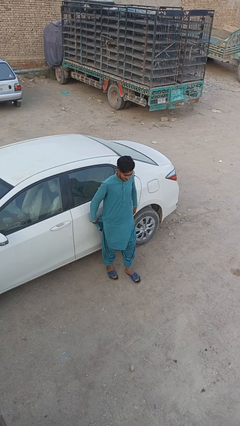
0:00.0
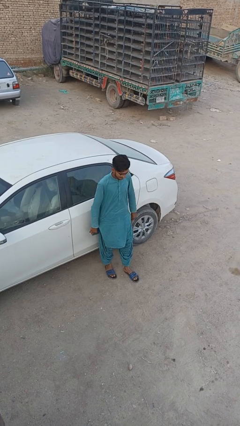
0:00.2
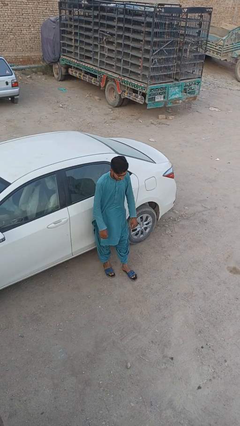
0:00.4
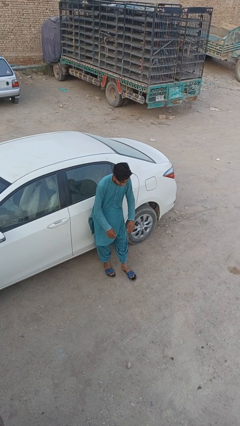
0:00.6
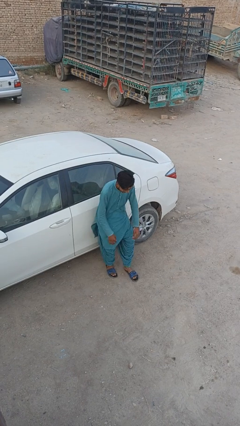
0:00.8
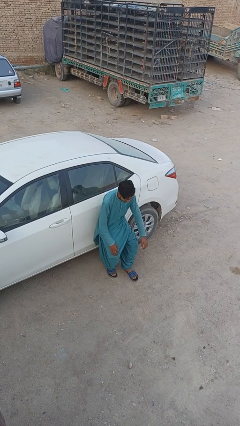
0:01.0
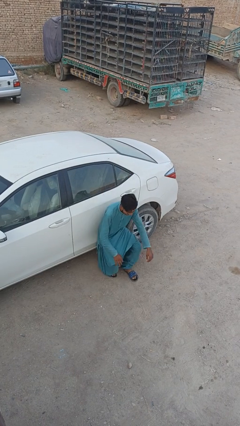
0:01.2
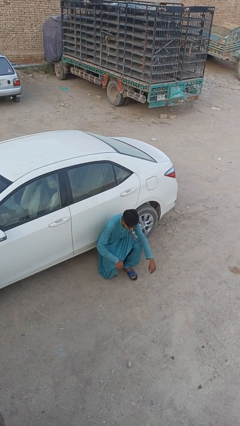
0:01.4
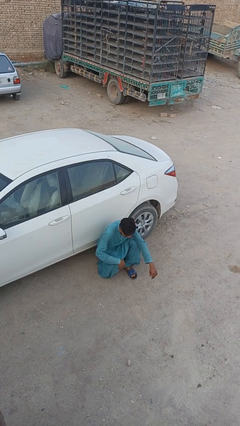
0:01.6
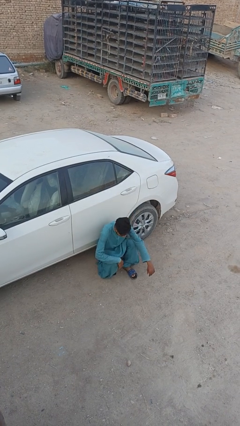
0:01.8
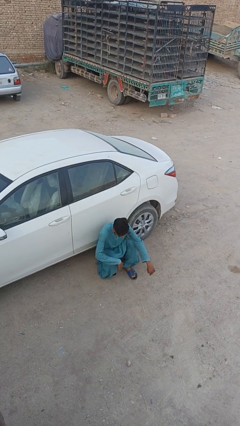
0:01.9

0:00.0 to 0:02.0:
person leans against car

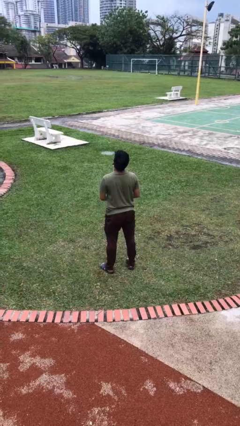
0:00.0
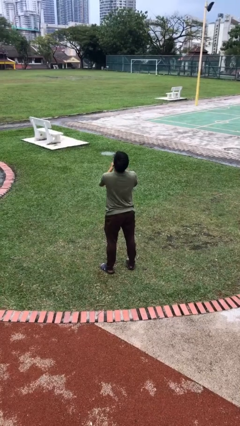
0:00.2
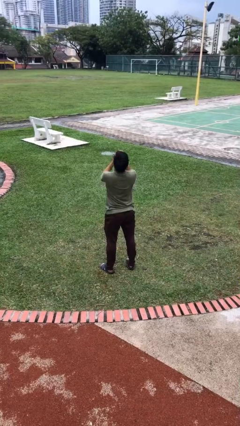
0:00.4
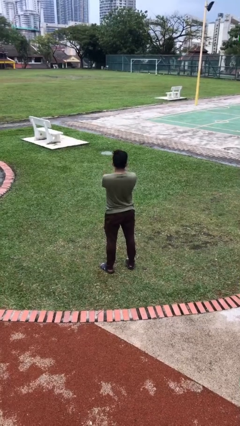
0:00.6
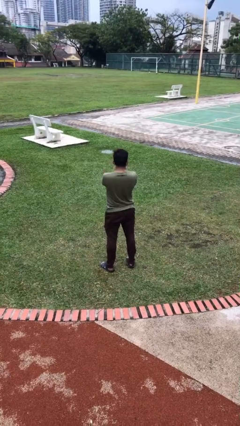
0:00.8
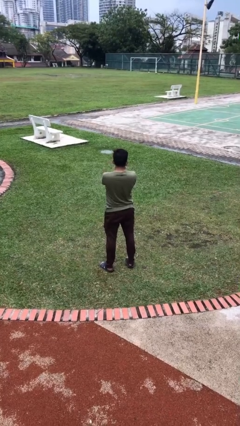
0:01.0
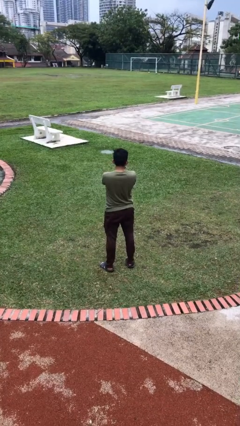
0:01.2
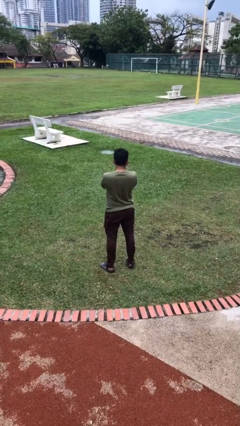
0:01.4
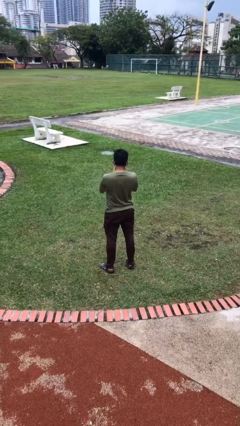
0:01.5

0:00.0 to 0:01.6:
person sneezes into hand

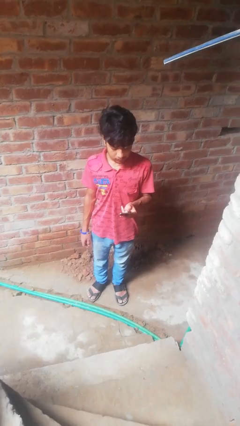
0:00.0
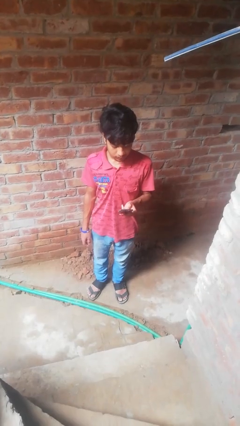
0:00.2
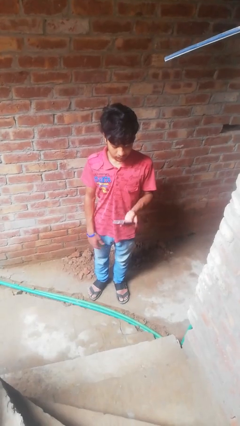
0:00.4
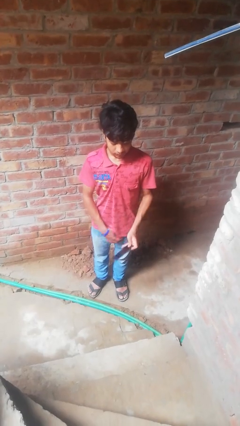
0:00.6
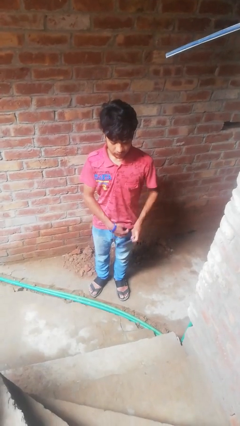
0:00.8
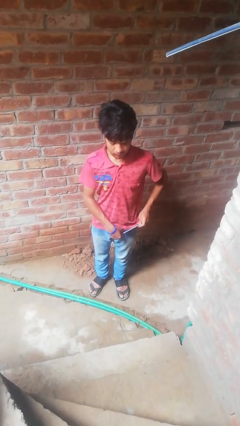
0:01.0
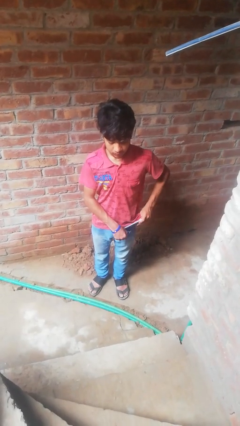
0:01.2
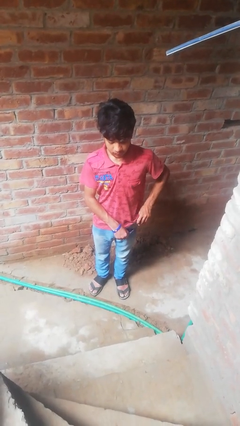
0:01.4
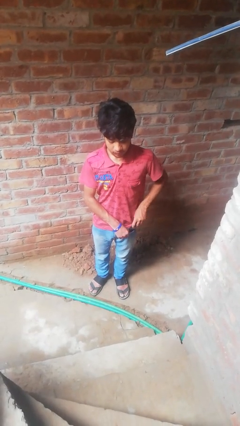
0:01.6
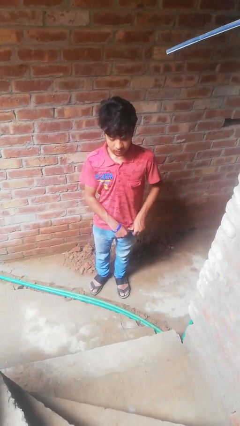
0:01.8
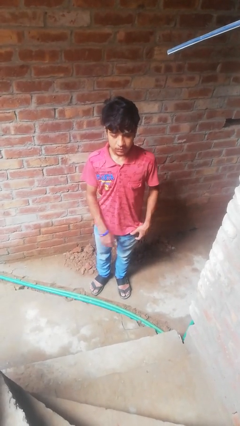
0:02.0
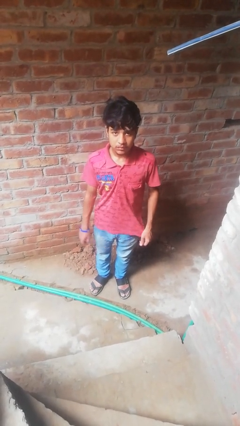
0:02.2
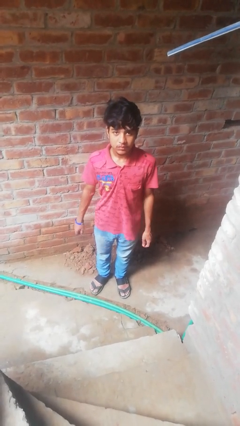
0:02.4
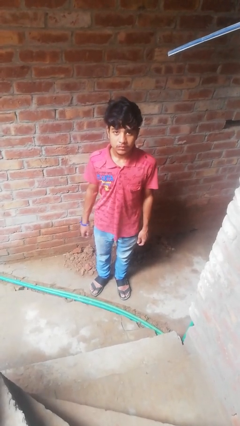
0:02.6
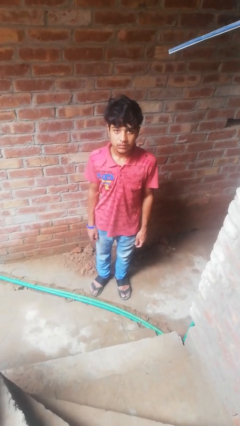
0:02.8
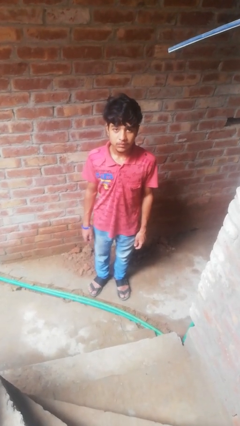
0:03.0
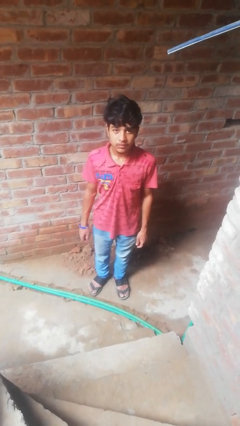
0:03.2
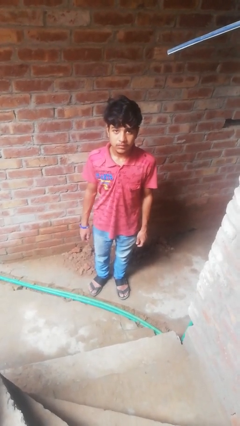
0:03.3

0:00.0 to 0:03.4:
person puts phone into pocket

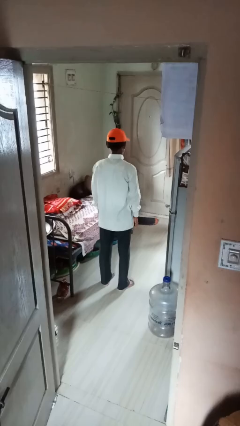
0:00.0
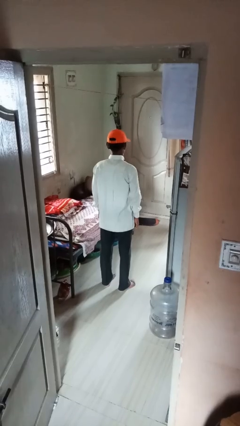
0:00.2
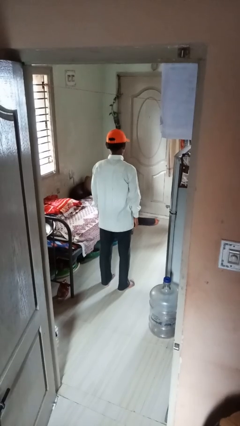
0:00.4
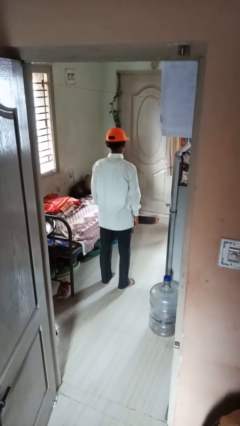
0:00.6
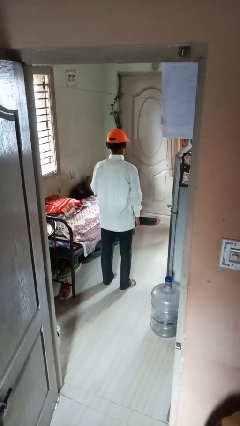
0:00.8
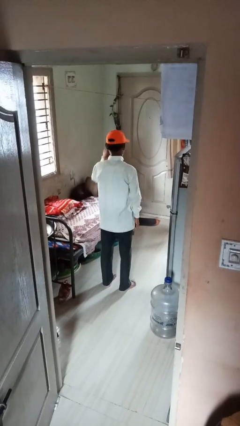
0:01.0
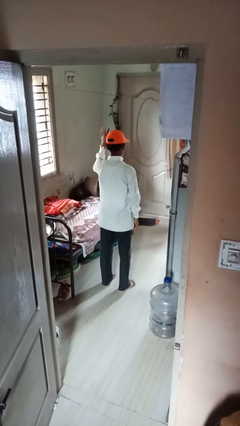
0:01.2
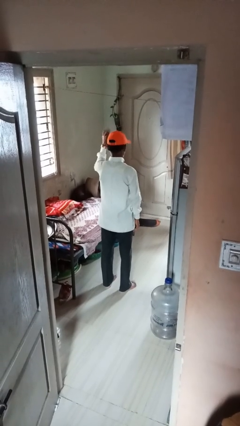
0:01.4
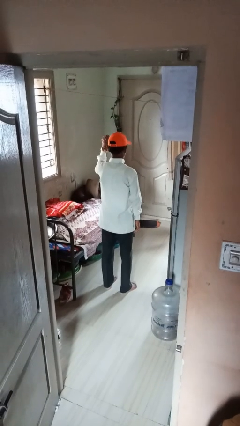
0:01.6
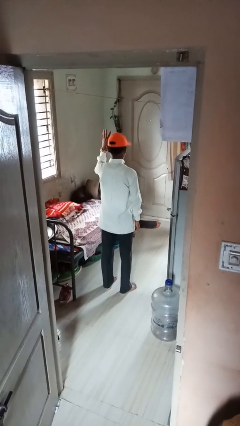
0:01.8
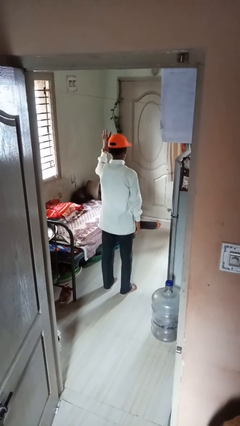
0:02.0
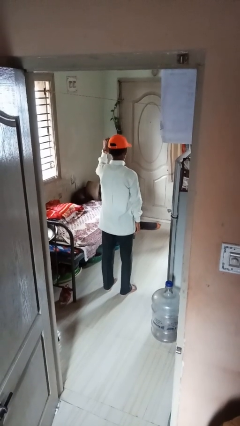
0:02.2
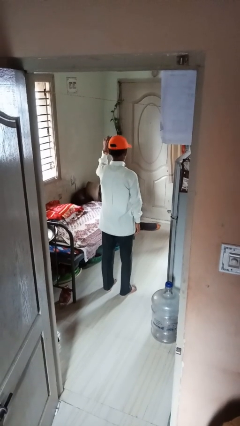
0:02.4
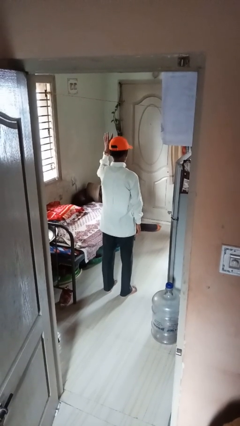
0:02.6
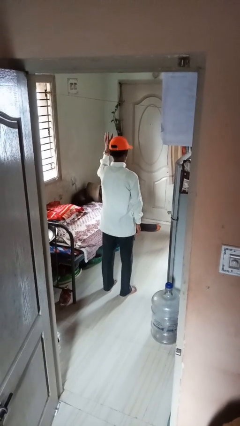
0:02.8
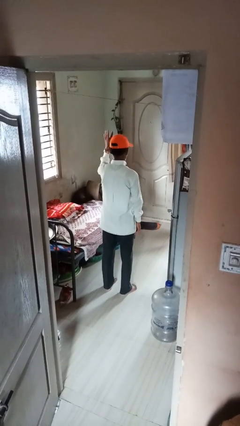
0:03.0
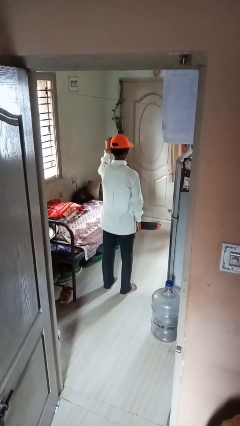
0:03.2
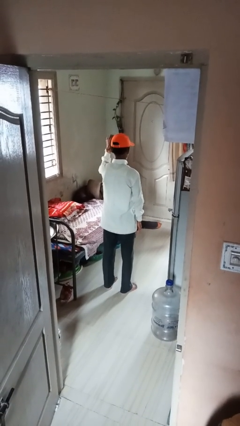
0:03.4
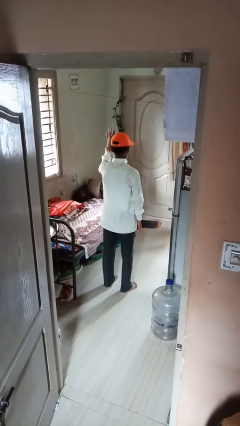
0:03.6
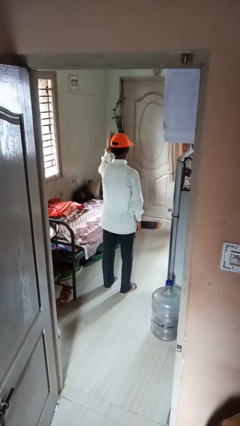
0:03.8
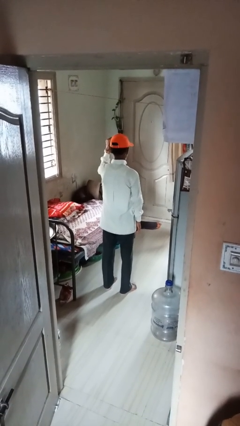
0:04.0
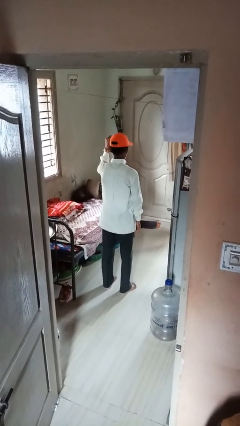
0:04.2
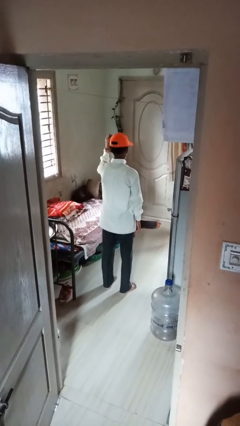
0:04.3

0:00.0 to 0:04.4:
person gestures come here

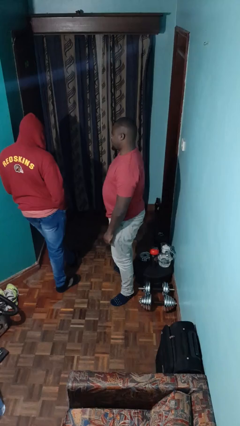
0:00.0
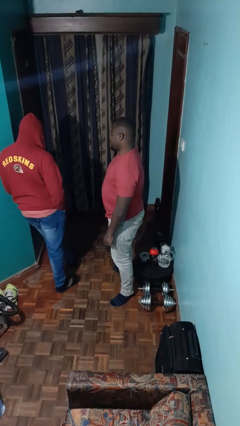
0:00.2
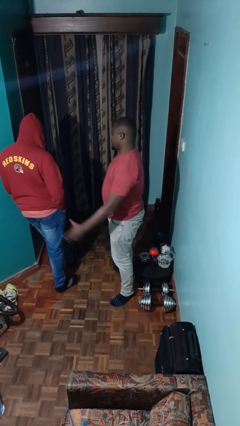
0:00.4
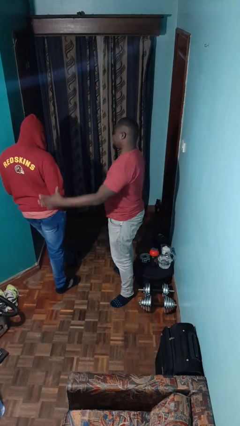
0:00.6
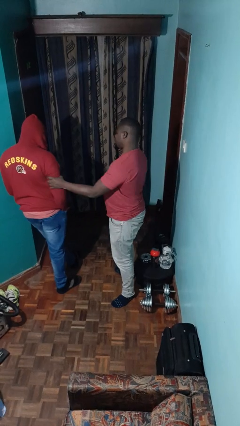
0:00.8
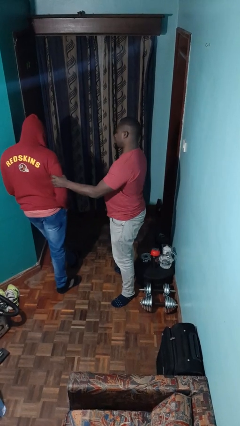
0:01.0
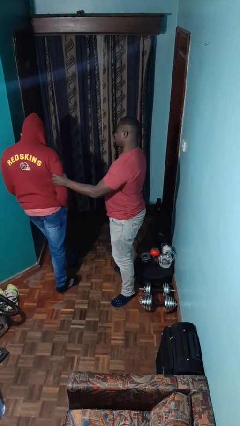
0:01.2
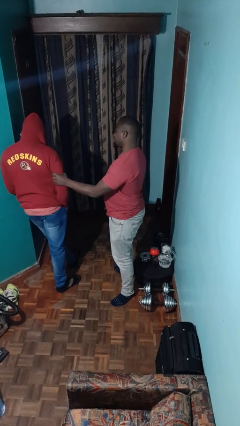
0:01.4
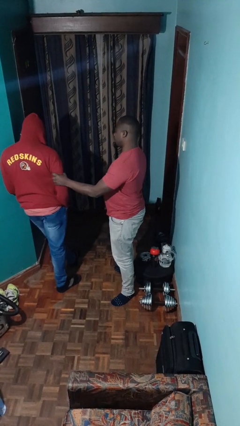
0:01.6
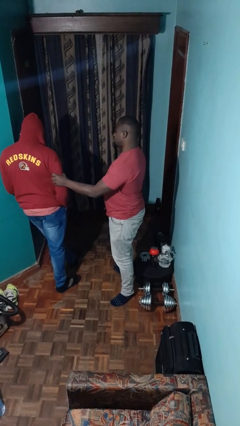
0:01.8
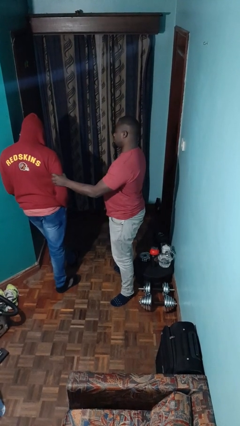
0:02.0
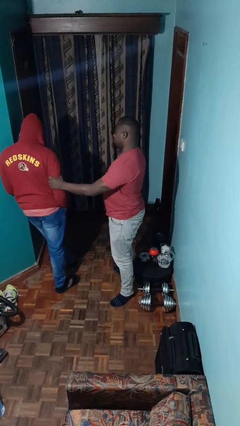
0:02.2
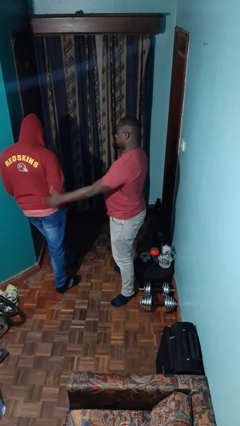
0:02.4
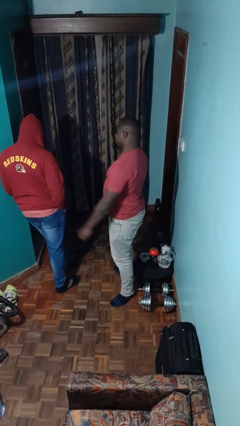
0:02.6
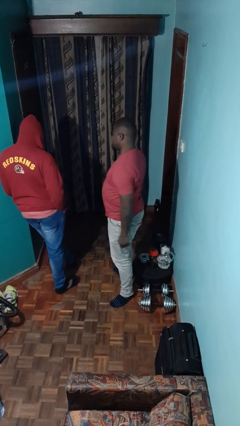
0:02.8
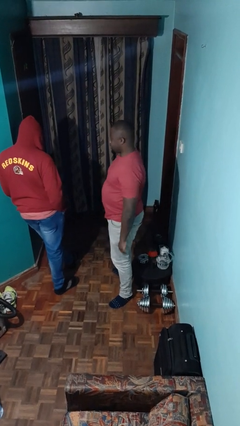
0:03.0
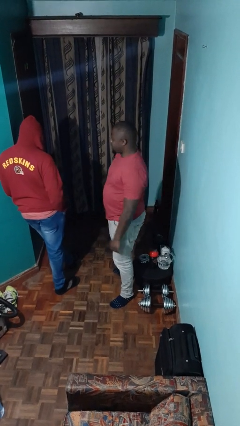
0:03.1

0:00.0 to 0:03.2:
person grabs person by bicep

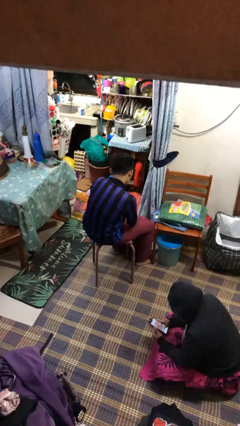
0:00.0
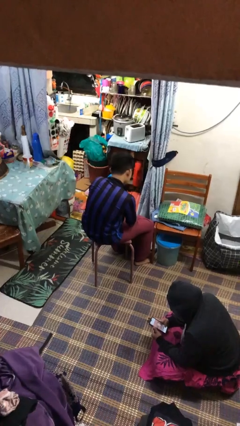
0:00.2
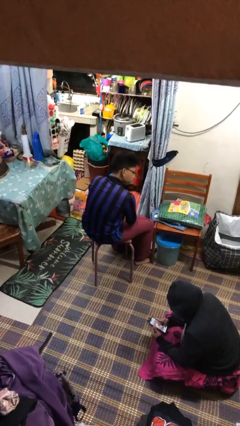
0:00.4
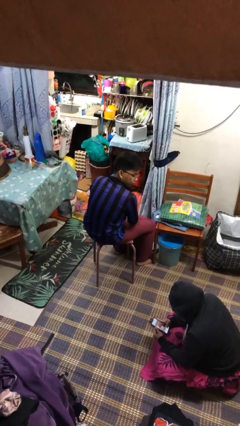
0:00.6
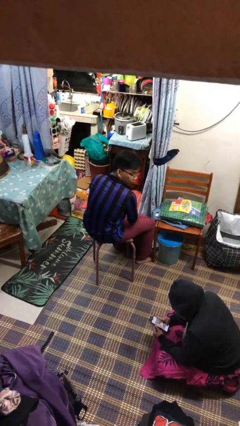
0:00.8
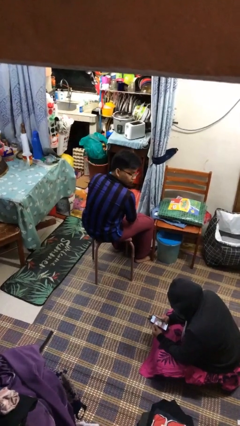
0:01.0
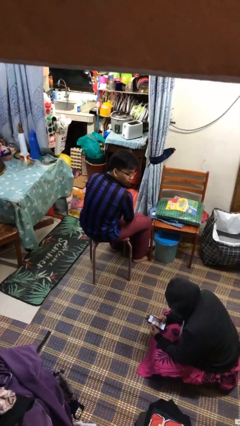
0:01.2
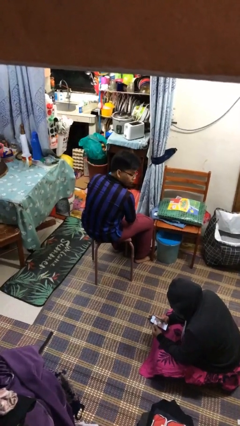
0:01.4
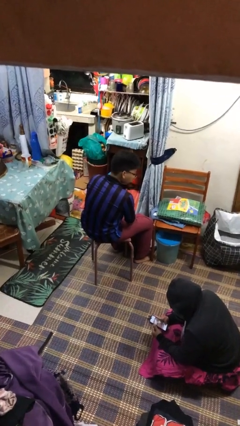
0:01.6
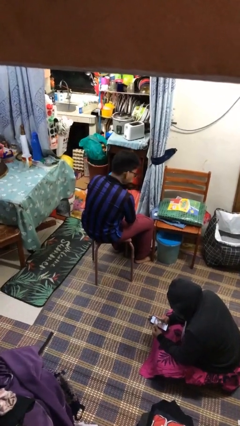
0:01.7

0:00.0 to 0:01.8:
person looks over shoulder

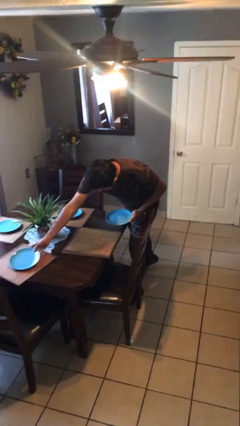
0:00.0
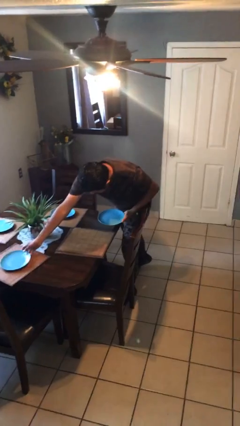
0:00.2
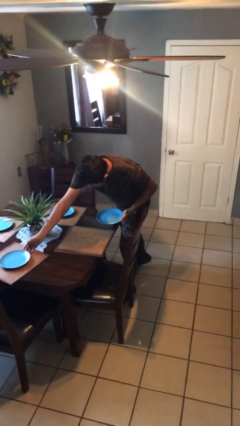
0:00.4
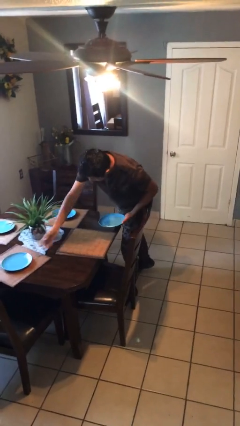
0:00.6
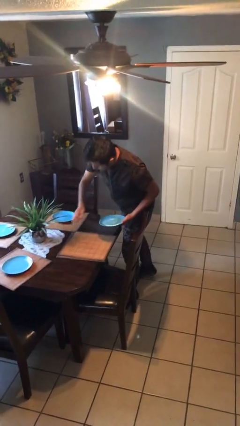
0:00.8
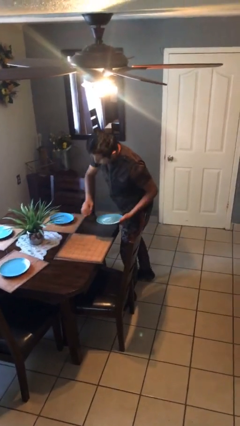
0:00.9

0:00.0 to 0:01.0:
person sets table
